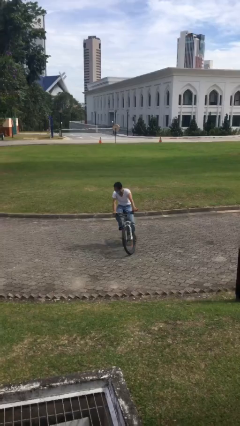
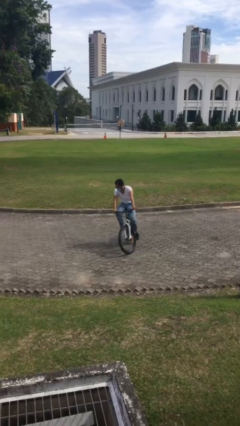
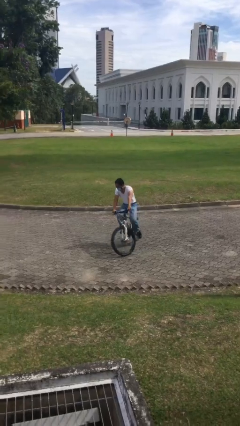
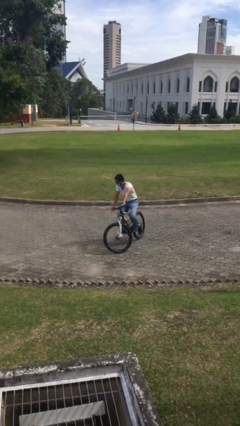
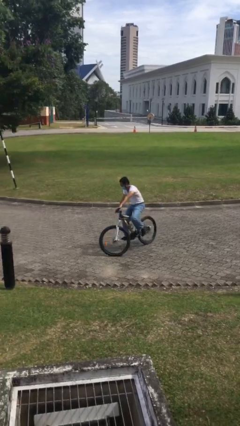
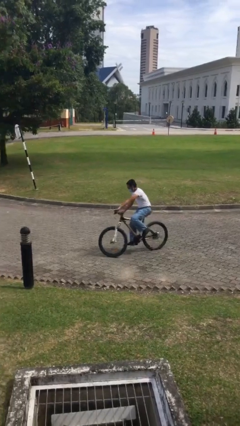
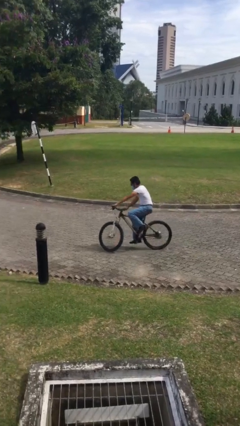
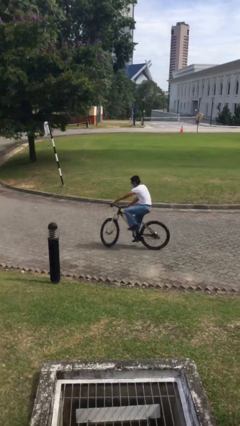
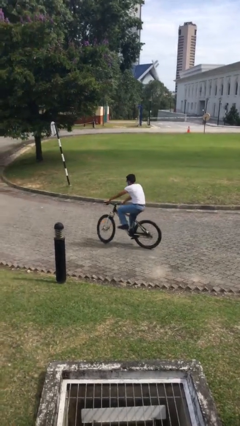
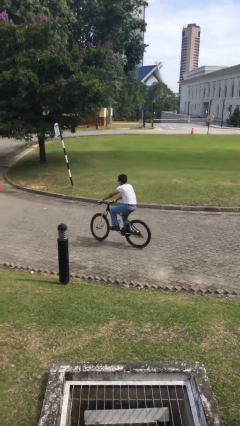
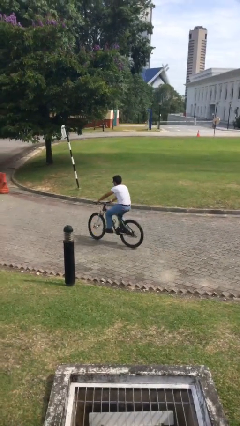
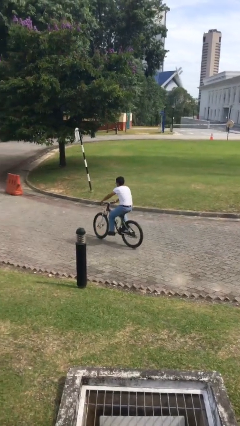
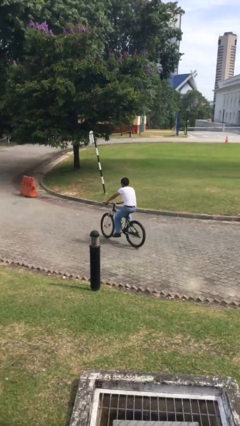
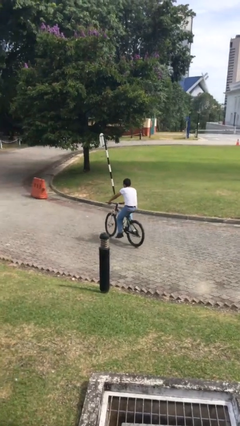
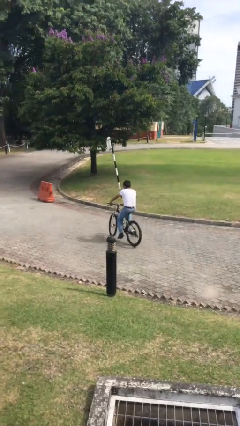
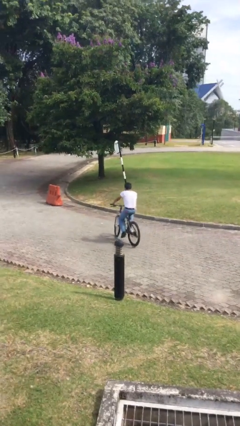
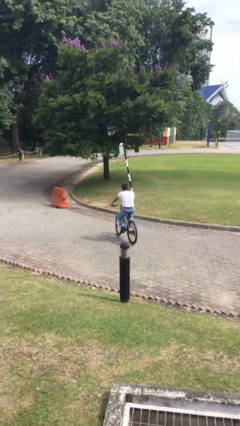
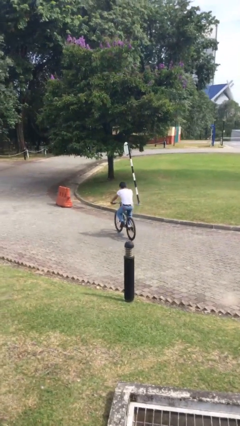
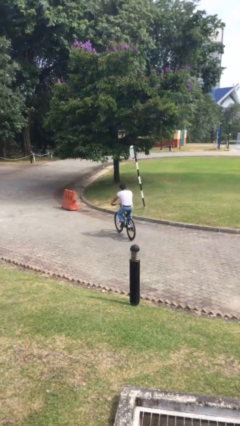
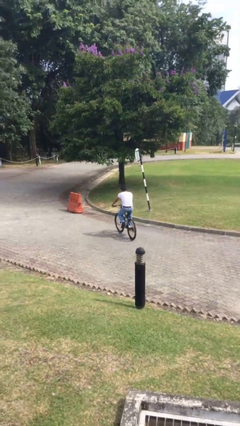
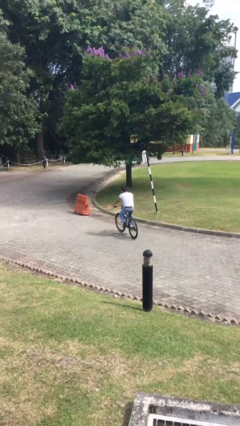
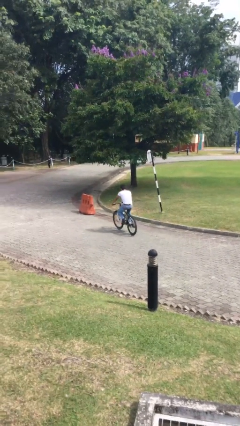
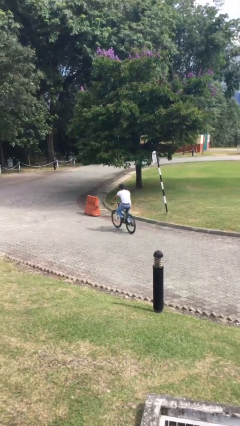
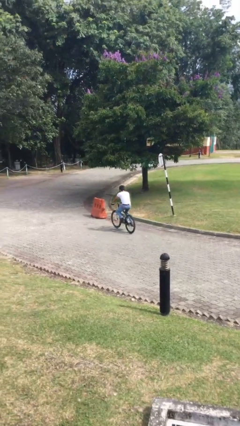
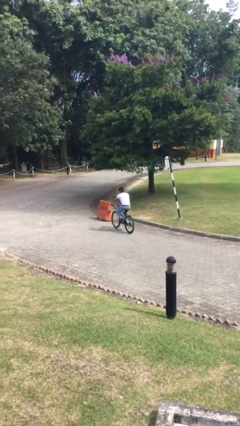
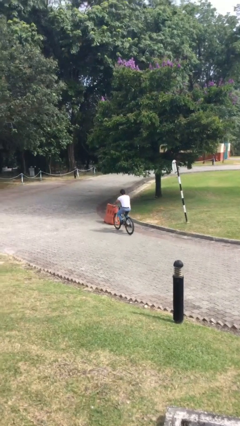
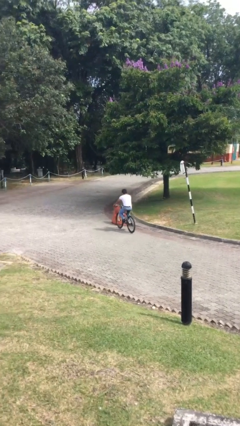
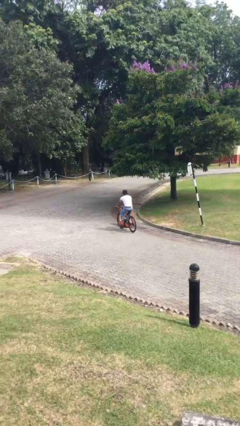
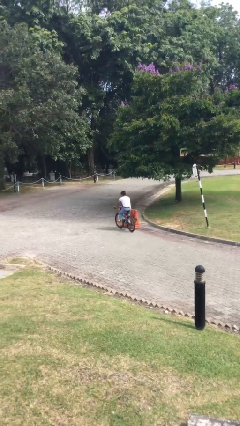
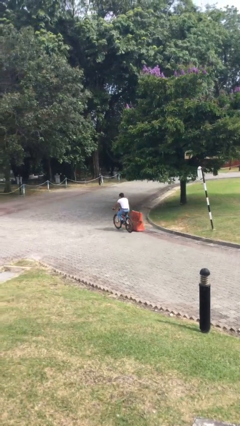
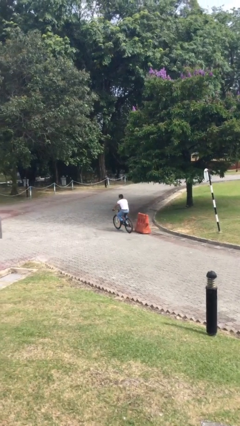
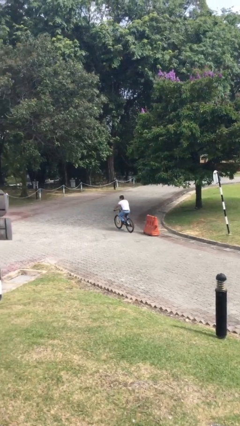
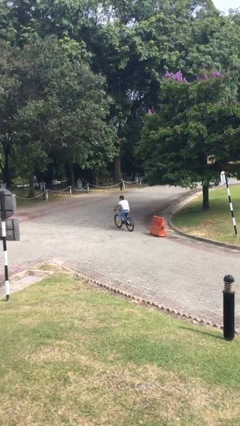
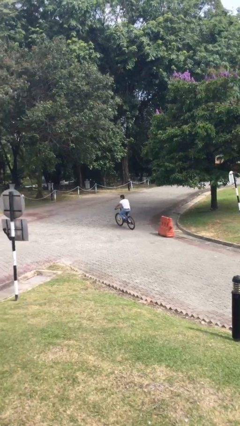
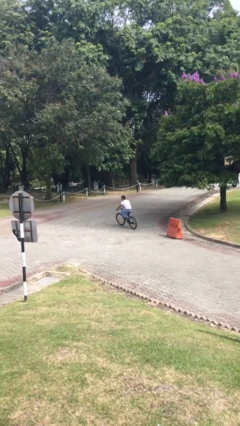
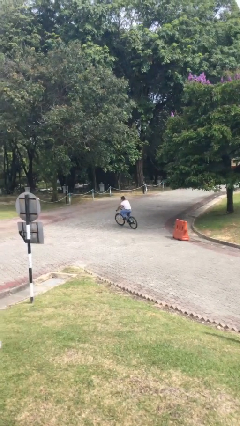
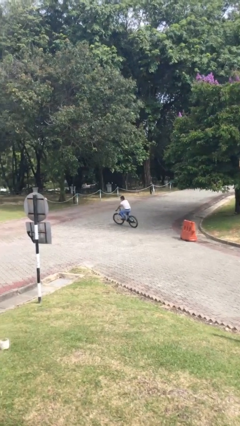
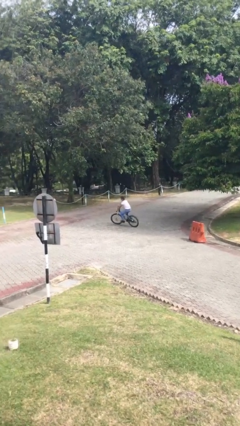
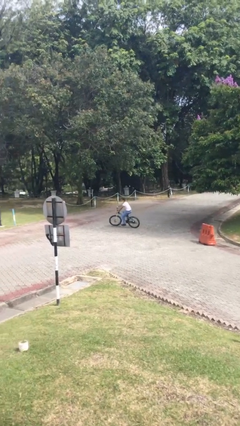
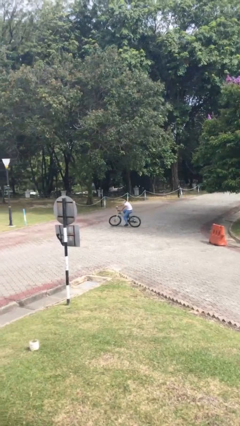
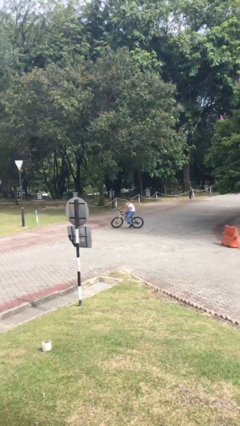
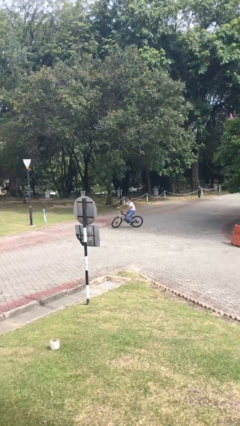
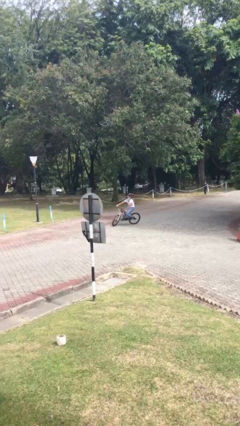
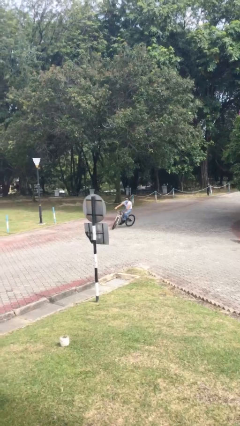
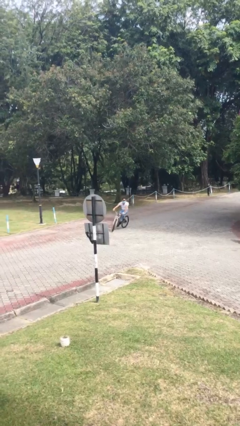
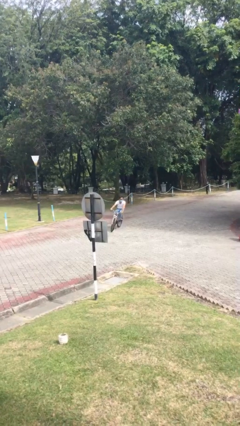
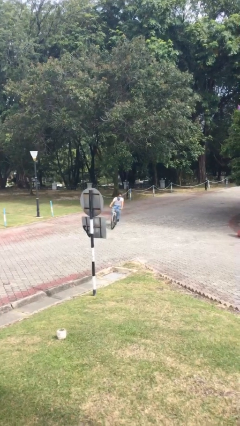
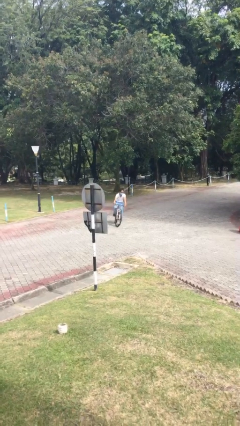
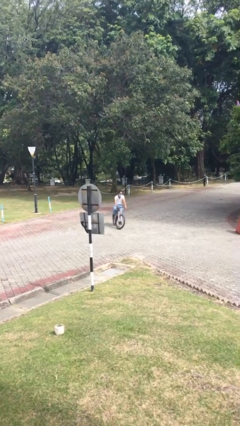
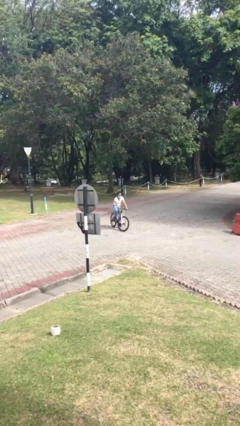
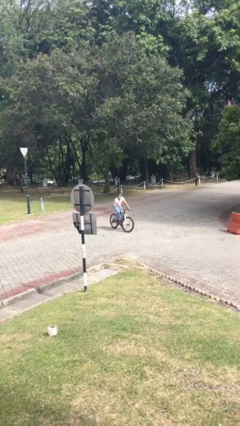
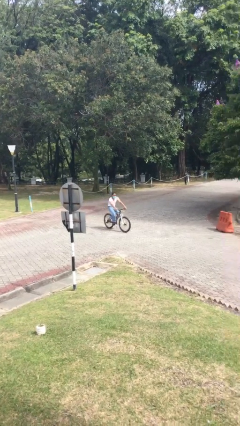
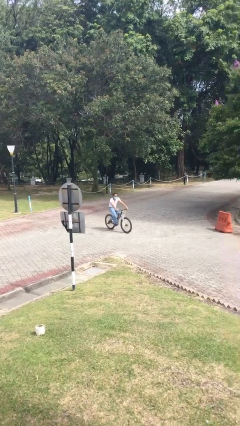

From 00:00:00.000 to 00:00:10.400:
person rides bicycle

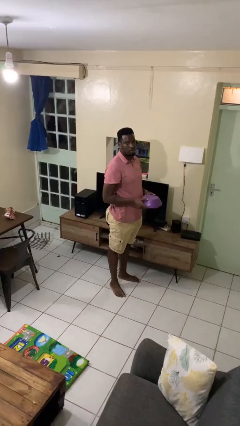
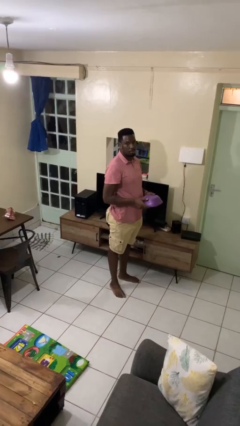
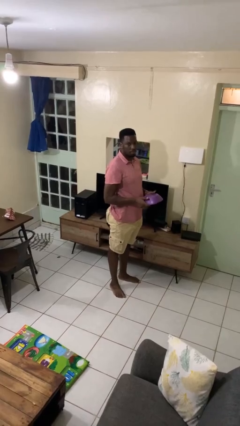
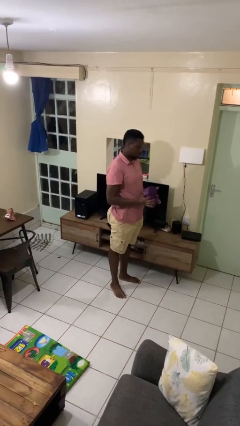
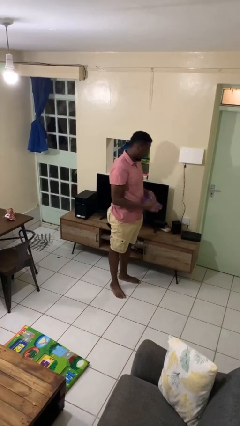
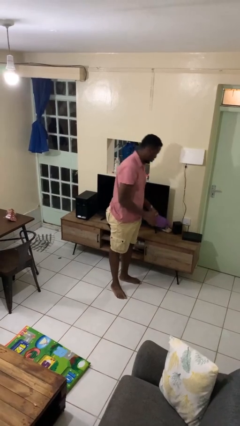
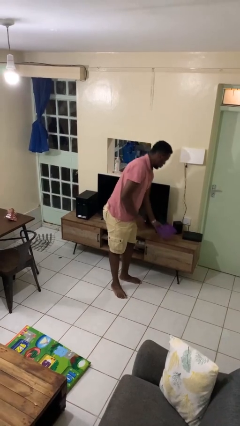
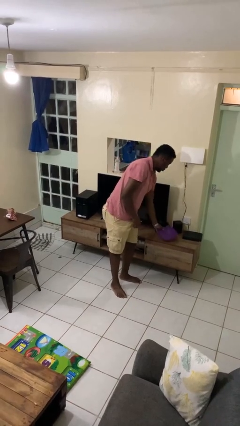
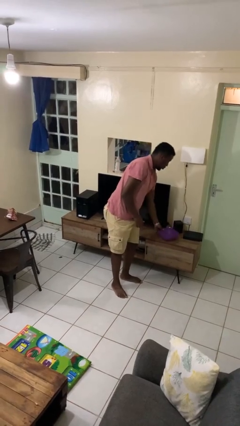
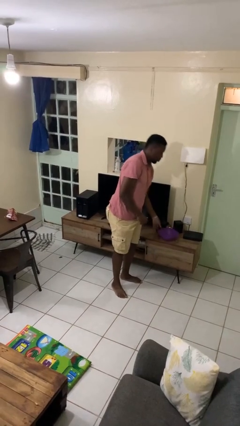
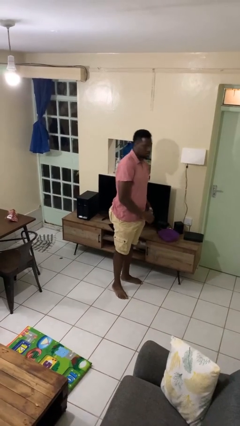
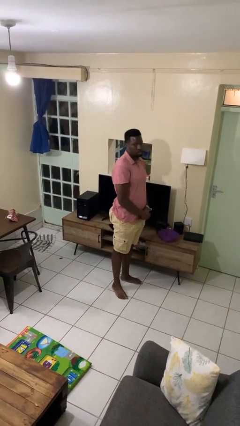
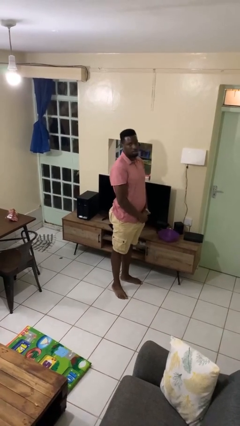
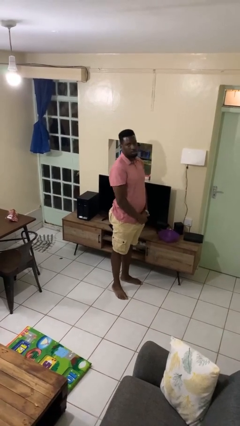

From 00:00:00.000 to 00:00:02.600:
person puts down object on countertop

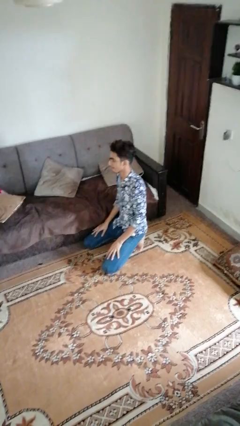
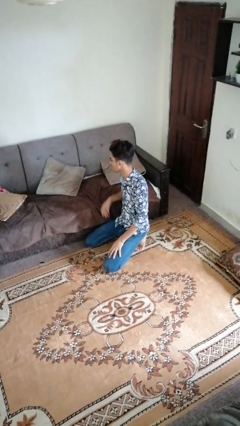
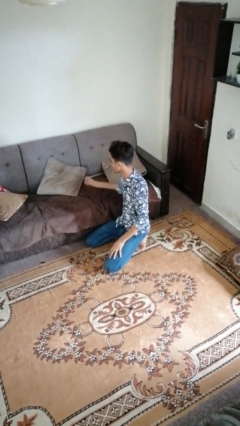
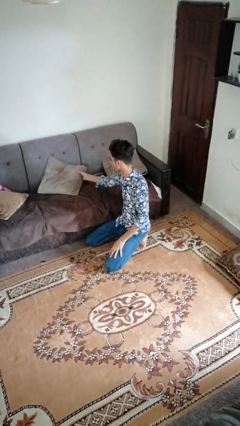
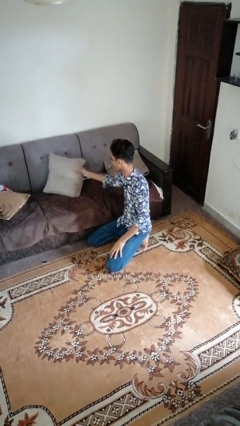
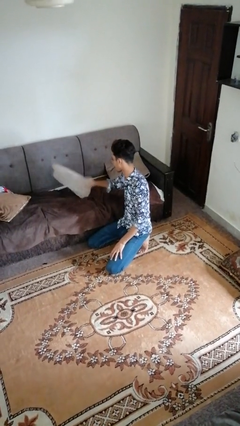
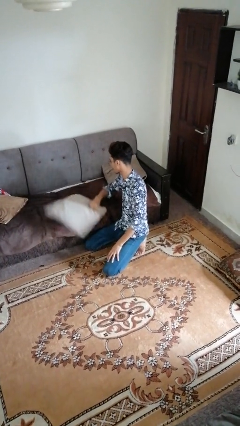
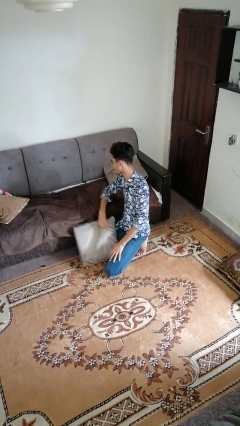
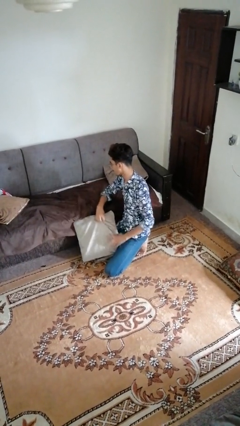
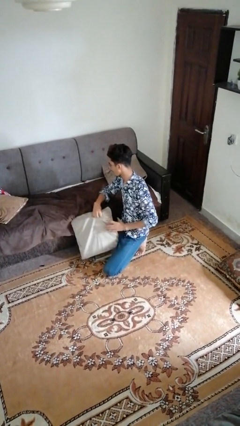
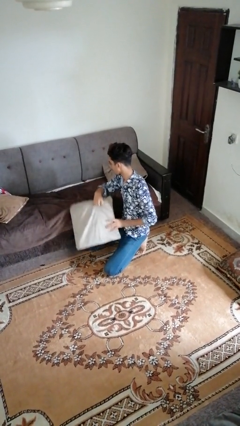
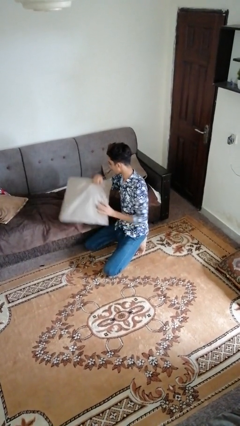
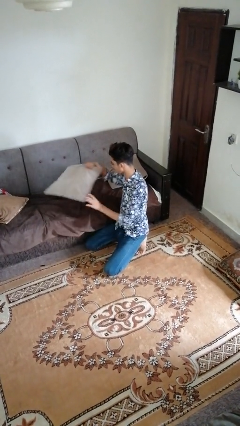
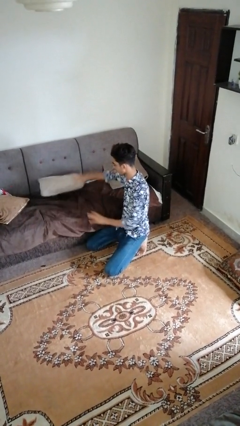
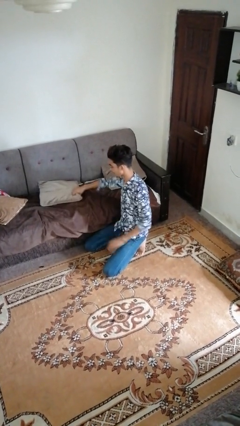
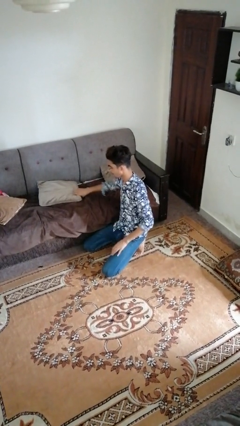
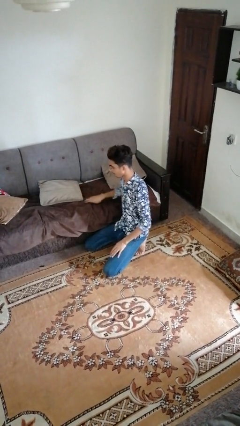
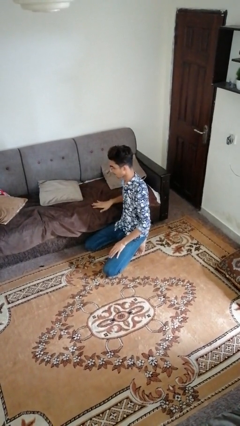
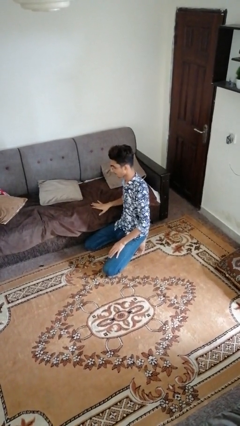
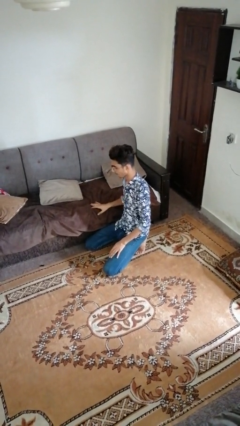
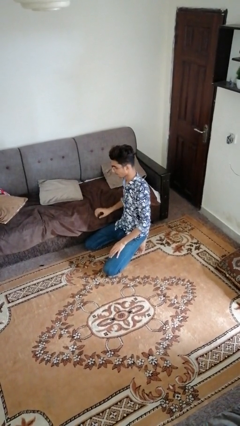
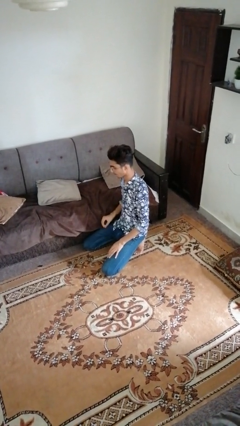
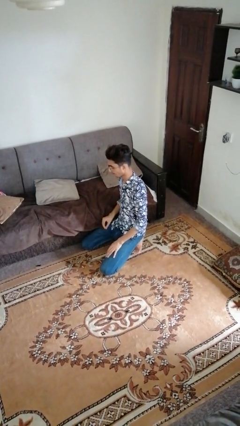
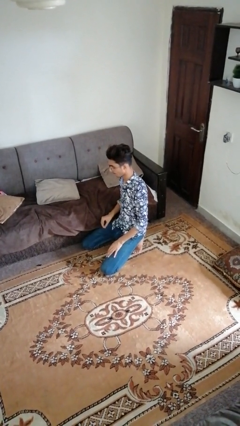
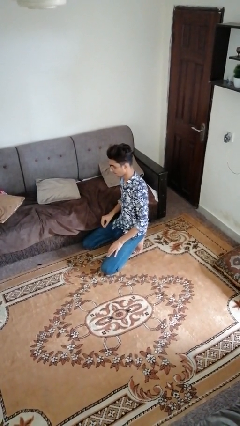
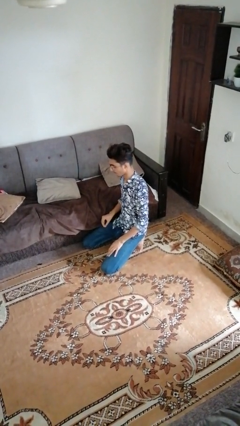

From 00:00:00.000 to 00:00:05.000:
person searches under couch
